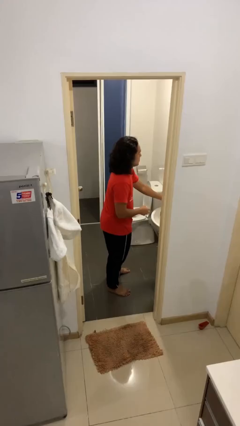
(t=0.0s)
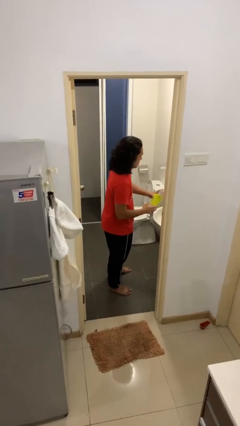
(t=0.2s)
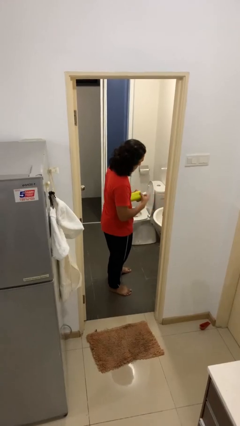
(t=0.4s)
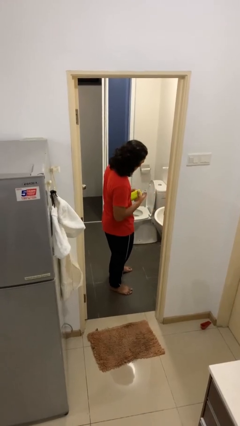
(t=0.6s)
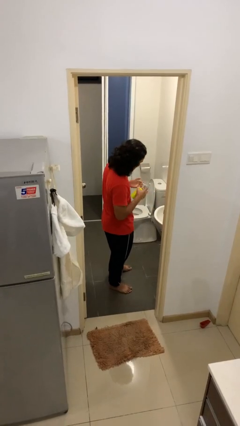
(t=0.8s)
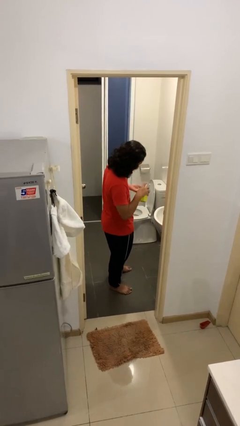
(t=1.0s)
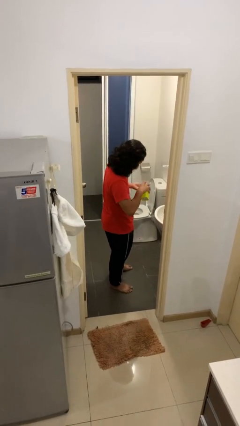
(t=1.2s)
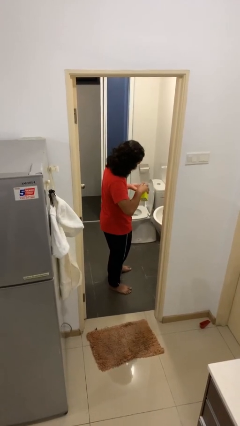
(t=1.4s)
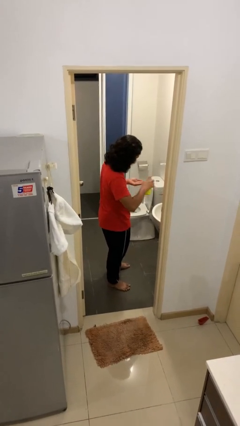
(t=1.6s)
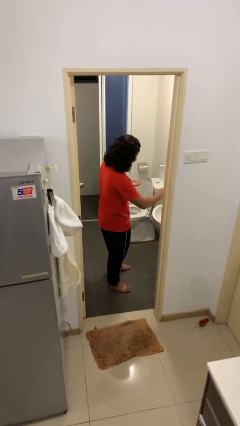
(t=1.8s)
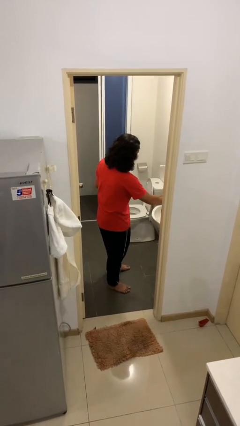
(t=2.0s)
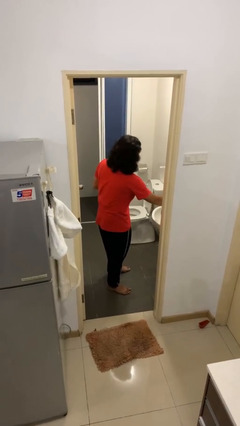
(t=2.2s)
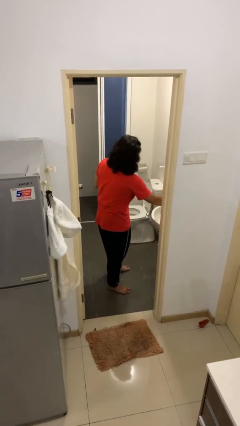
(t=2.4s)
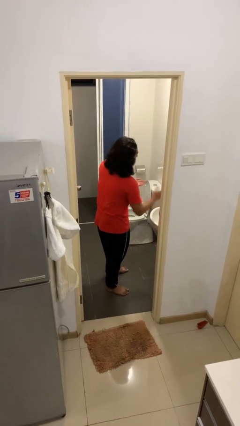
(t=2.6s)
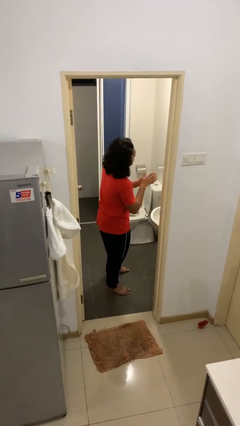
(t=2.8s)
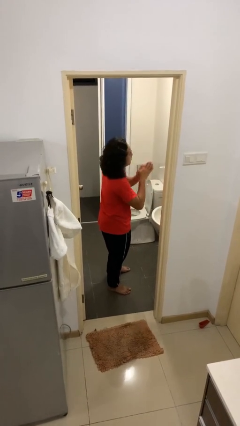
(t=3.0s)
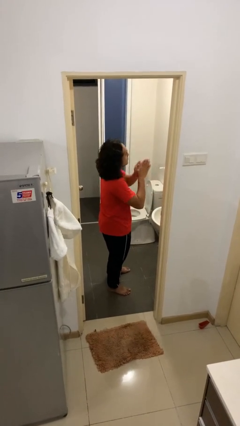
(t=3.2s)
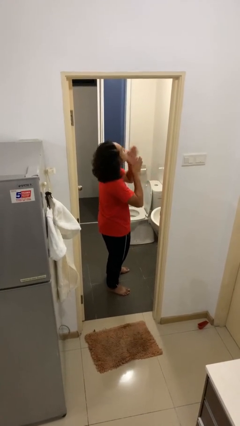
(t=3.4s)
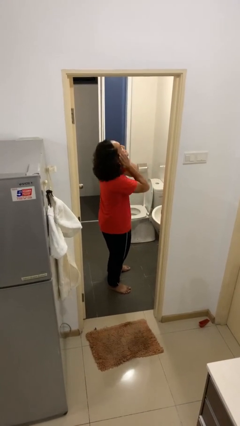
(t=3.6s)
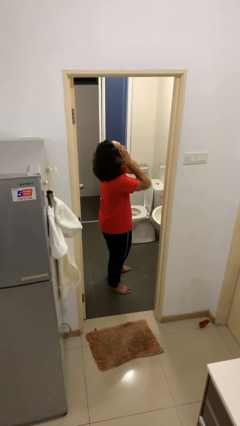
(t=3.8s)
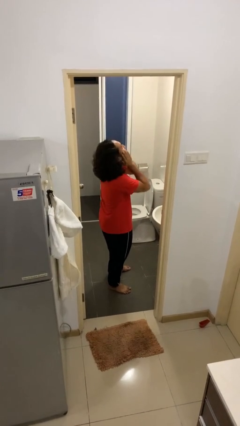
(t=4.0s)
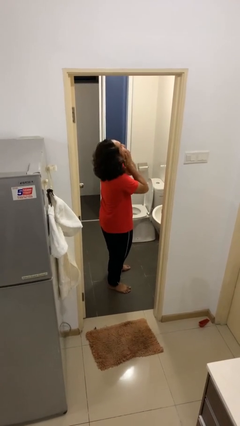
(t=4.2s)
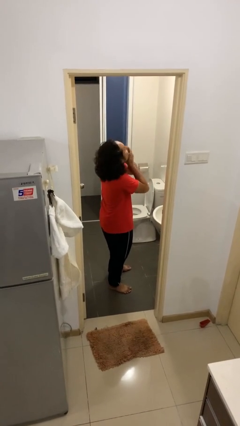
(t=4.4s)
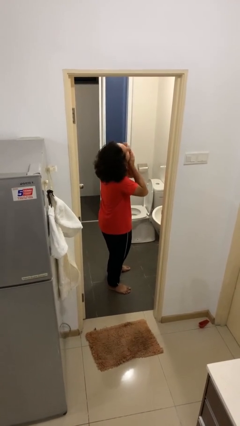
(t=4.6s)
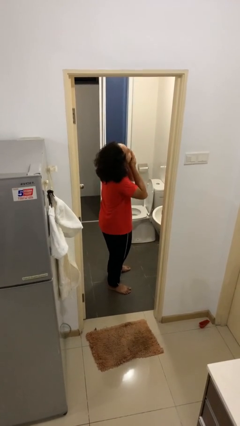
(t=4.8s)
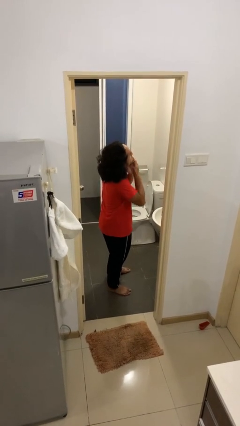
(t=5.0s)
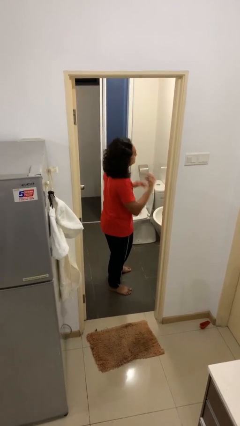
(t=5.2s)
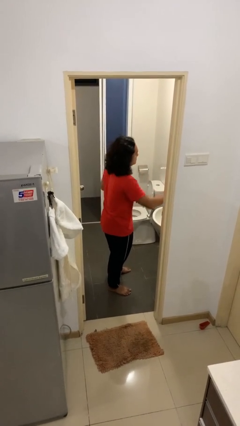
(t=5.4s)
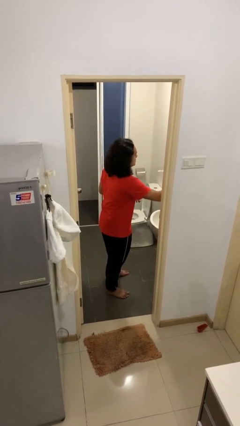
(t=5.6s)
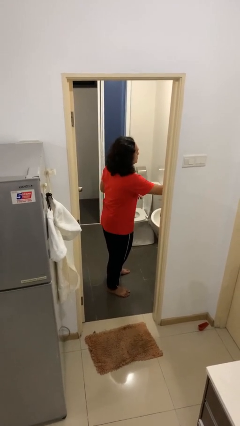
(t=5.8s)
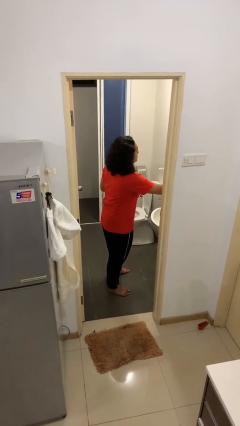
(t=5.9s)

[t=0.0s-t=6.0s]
person applies shaving cream

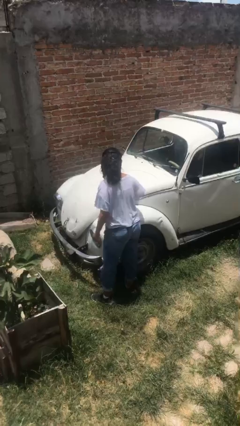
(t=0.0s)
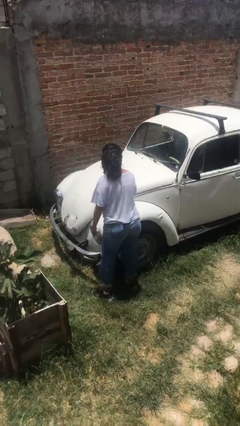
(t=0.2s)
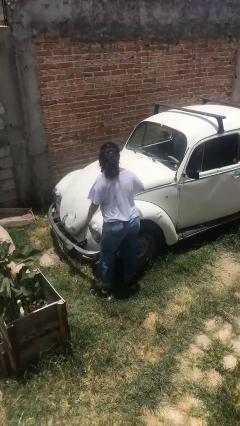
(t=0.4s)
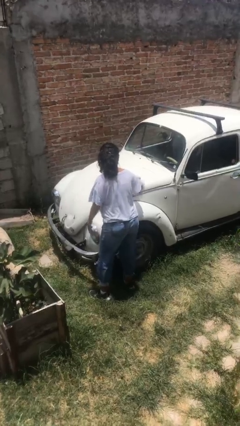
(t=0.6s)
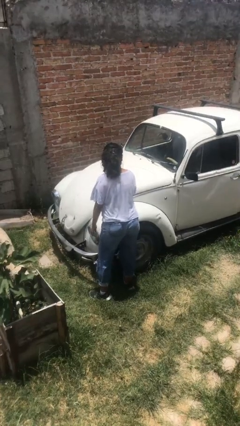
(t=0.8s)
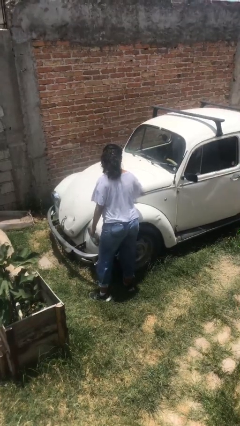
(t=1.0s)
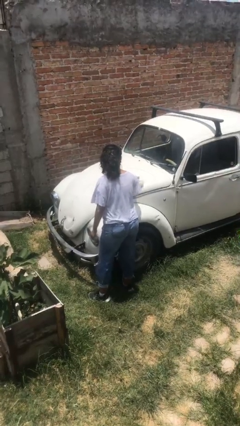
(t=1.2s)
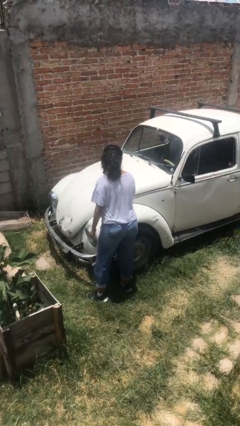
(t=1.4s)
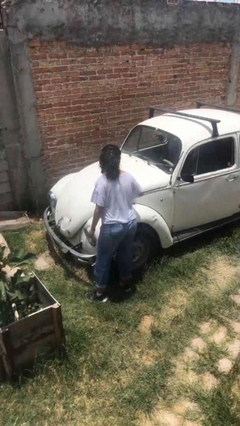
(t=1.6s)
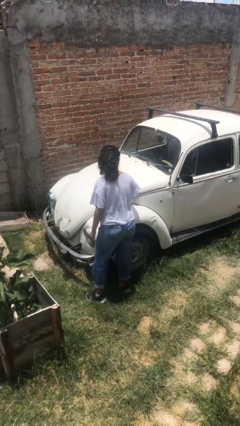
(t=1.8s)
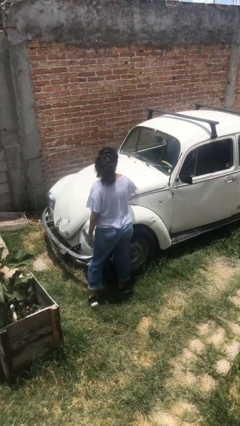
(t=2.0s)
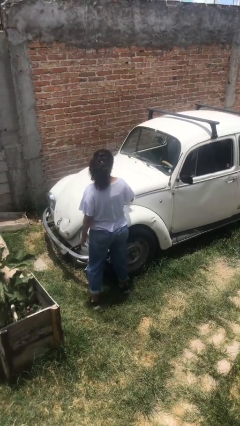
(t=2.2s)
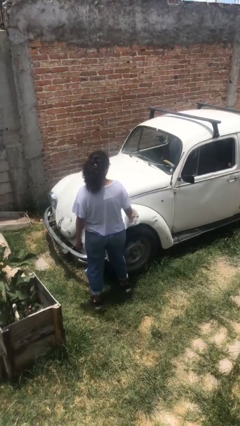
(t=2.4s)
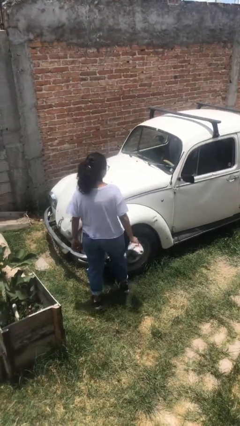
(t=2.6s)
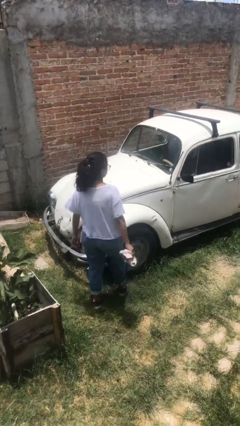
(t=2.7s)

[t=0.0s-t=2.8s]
person polishes car with rag

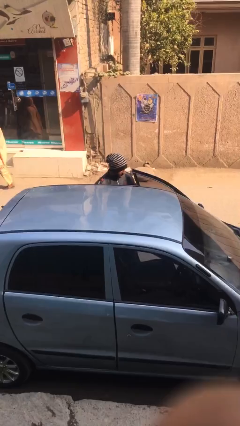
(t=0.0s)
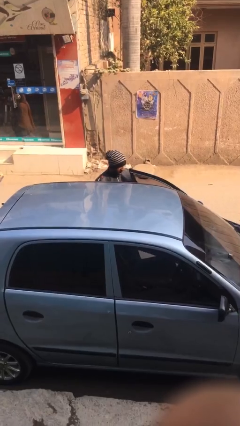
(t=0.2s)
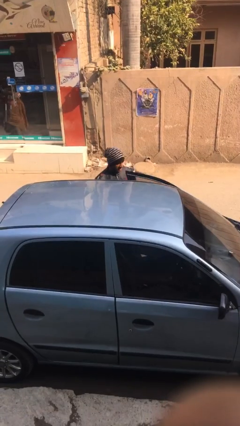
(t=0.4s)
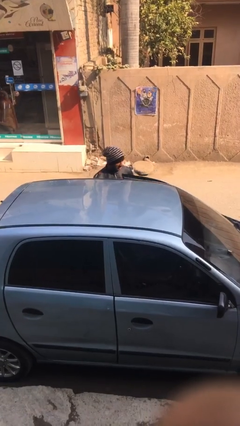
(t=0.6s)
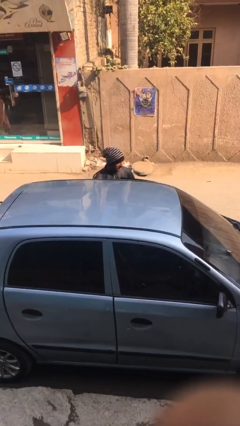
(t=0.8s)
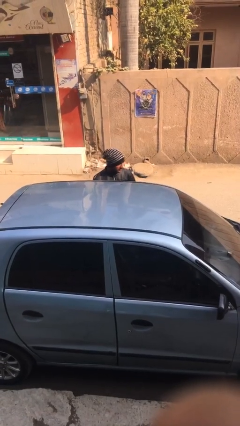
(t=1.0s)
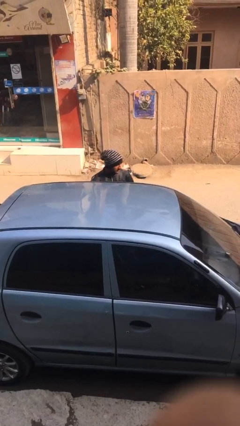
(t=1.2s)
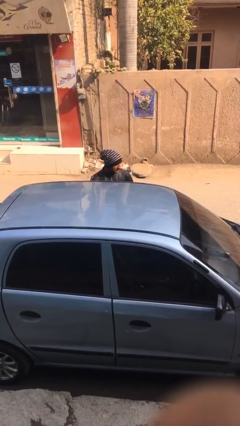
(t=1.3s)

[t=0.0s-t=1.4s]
person closes car door

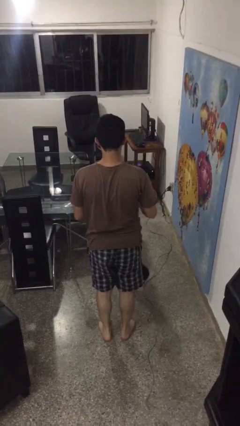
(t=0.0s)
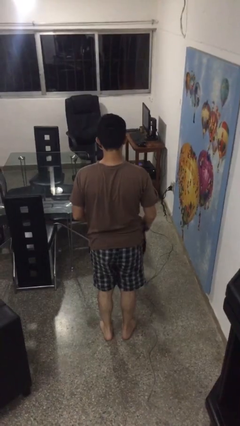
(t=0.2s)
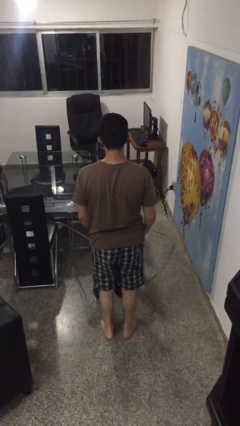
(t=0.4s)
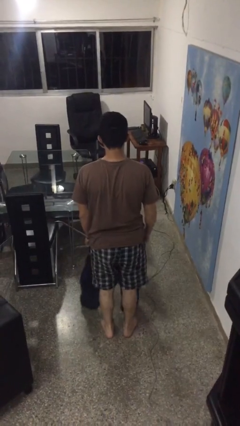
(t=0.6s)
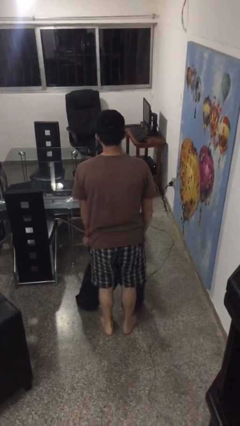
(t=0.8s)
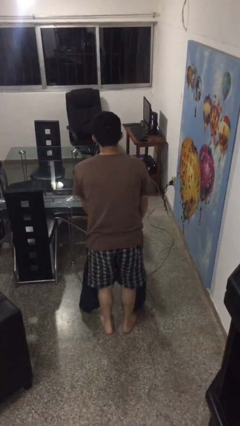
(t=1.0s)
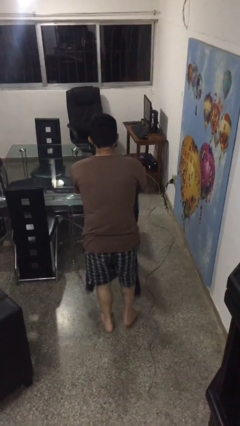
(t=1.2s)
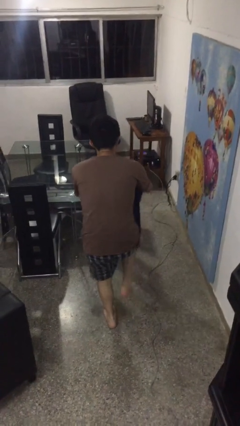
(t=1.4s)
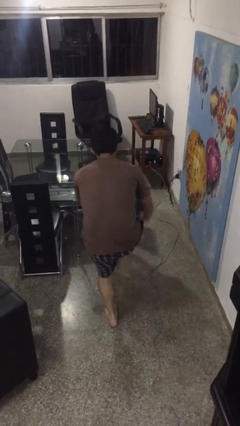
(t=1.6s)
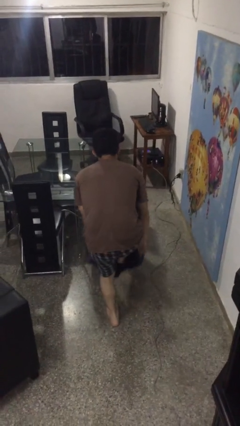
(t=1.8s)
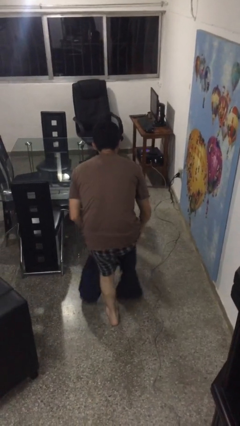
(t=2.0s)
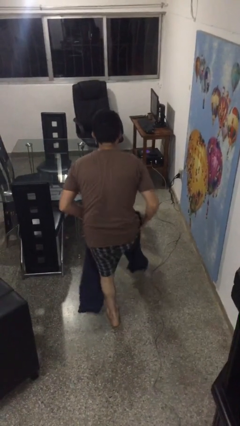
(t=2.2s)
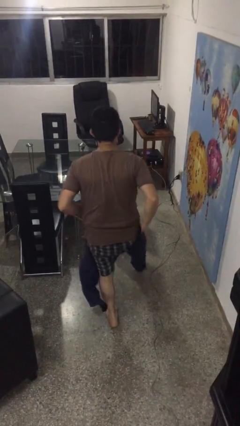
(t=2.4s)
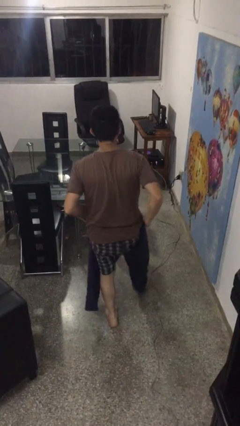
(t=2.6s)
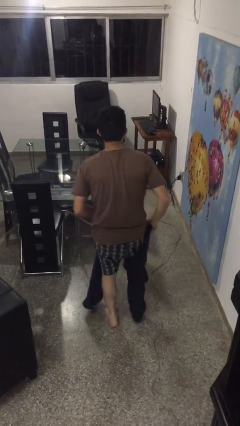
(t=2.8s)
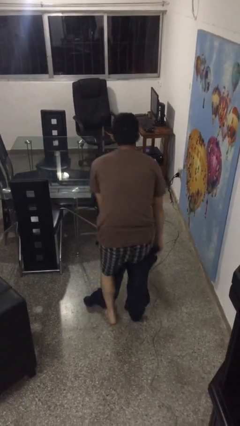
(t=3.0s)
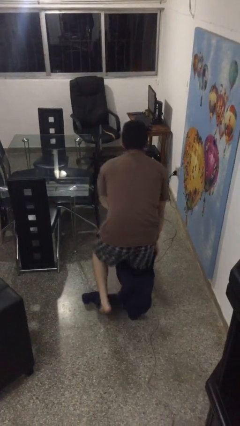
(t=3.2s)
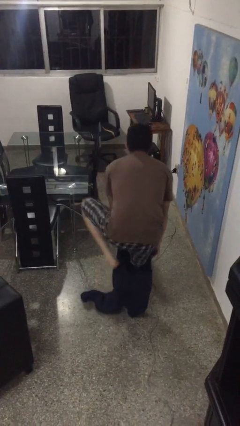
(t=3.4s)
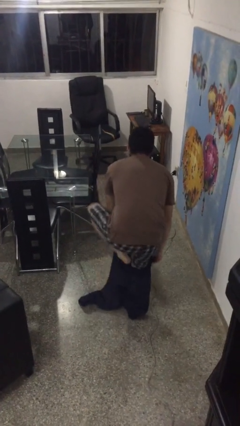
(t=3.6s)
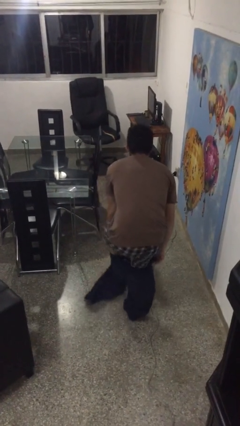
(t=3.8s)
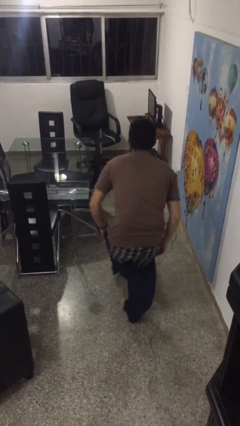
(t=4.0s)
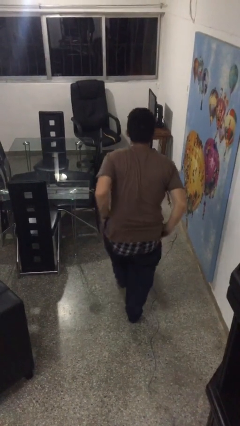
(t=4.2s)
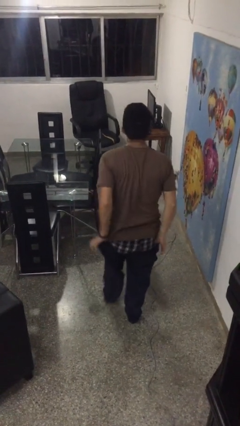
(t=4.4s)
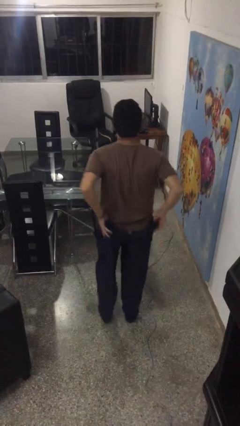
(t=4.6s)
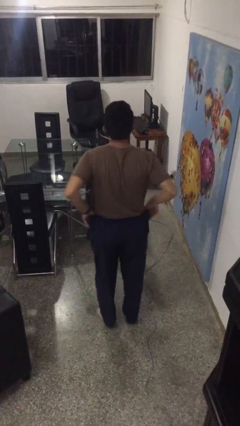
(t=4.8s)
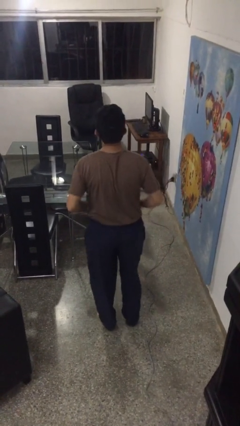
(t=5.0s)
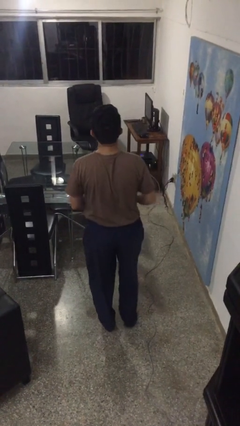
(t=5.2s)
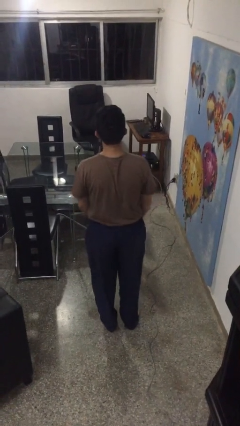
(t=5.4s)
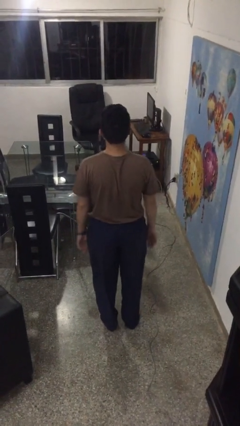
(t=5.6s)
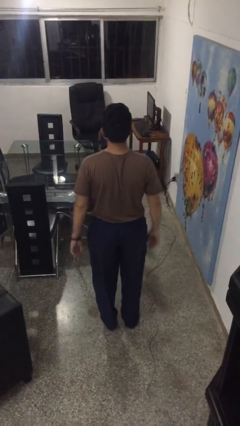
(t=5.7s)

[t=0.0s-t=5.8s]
person puts on pants

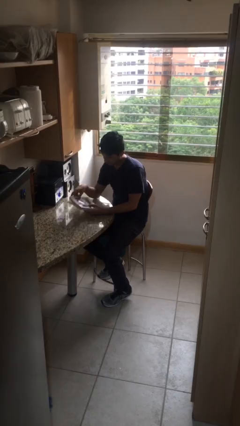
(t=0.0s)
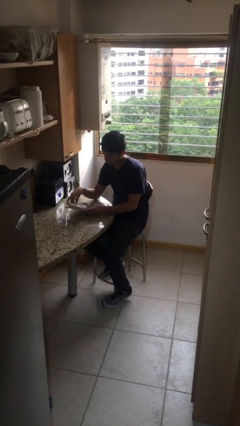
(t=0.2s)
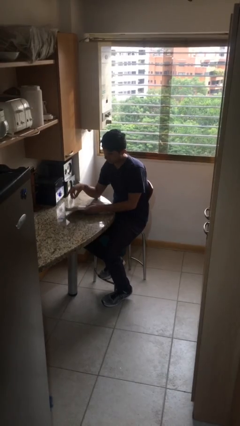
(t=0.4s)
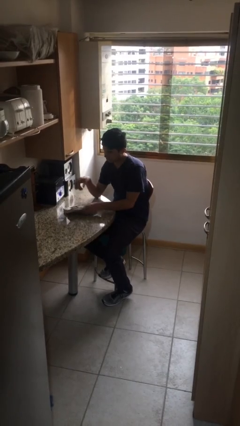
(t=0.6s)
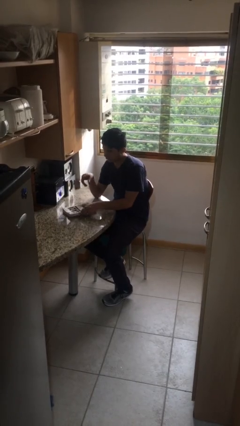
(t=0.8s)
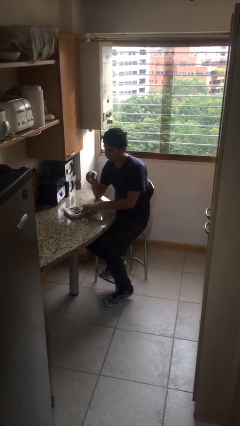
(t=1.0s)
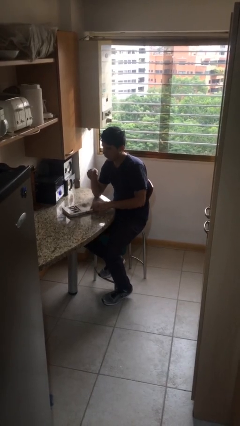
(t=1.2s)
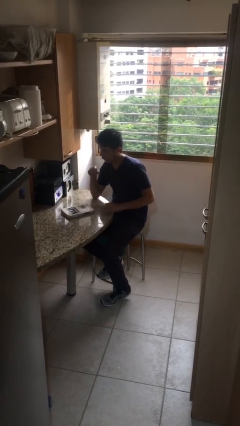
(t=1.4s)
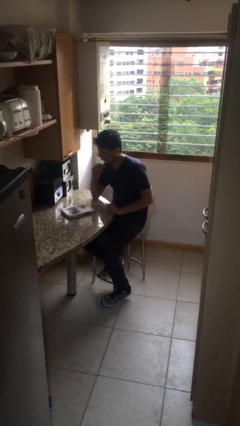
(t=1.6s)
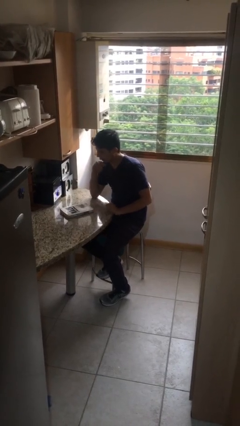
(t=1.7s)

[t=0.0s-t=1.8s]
person puts down object on table
